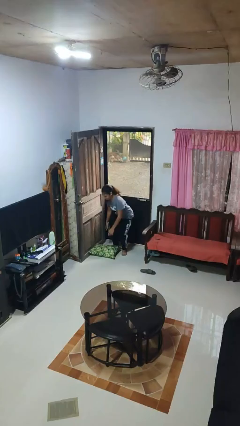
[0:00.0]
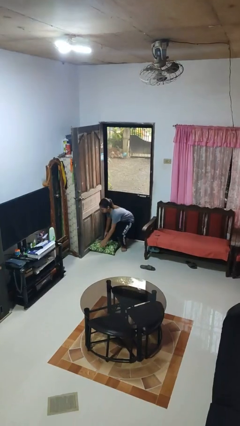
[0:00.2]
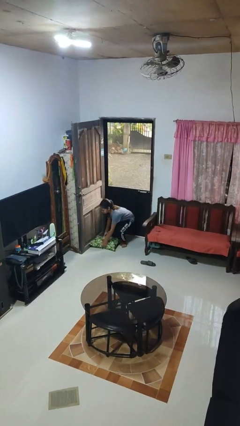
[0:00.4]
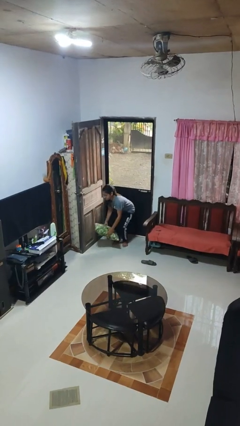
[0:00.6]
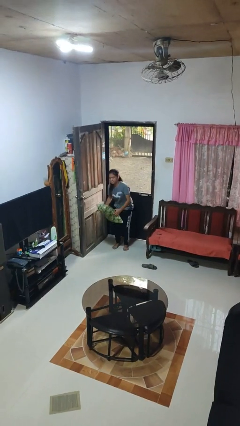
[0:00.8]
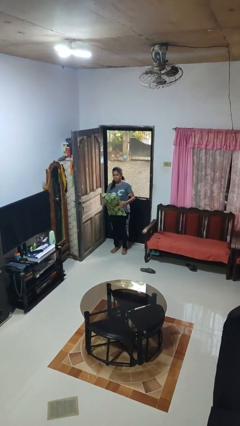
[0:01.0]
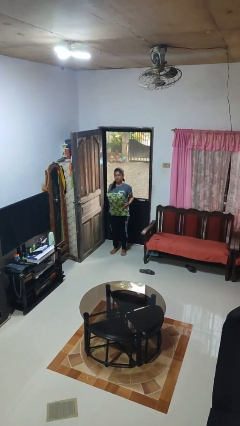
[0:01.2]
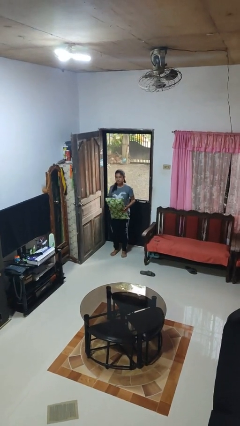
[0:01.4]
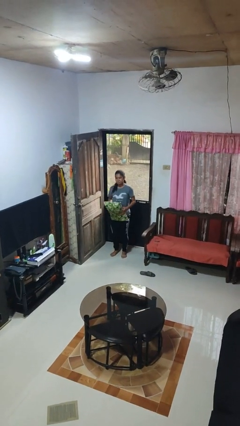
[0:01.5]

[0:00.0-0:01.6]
person picks up object from floor

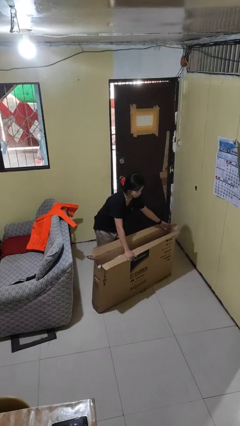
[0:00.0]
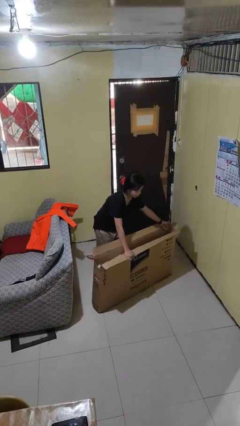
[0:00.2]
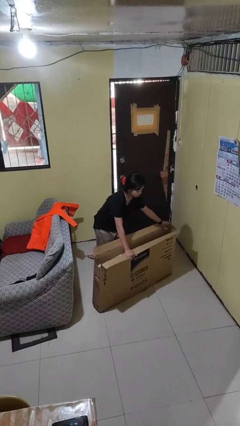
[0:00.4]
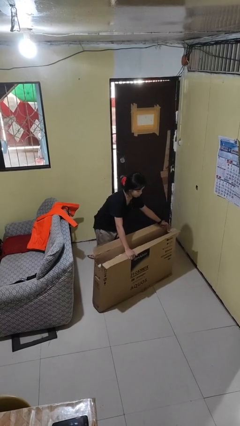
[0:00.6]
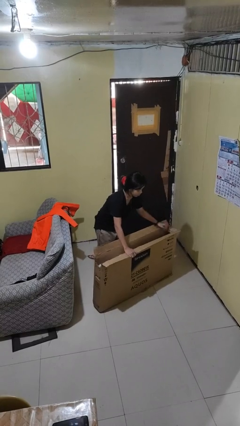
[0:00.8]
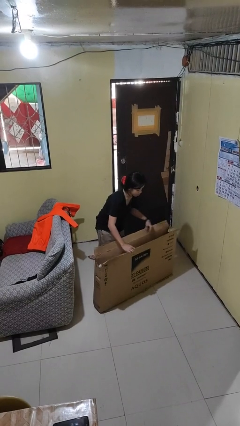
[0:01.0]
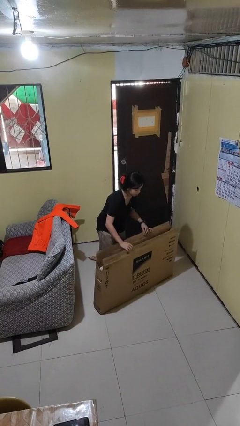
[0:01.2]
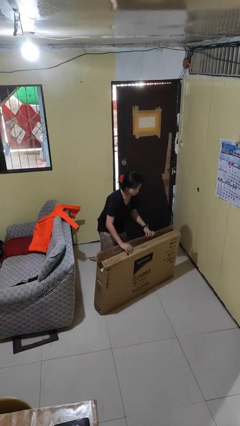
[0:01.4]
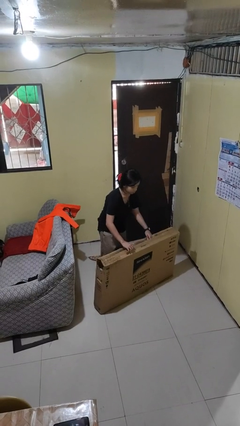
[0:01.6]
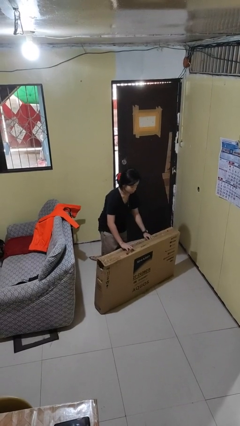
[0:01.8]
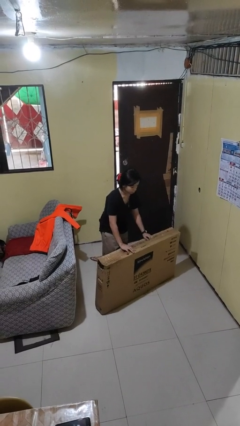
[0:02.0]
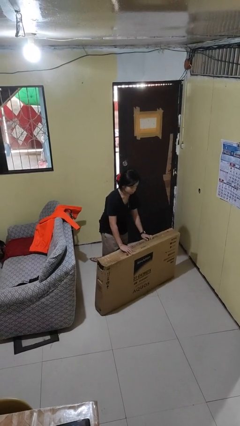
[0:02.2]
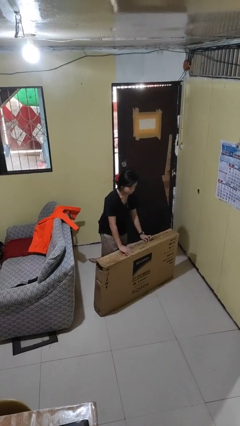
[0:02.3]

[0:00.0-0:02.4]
person closes box

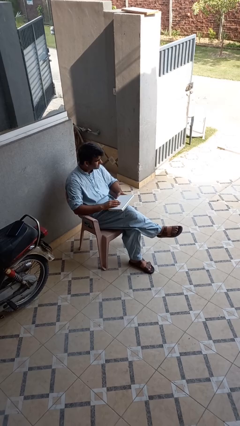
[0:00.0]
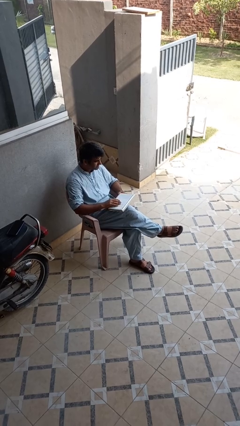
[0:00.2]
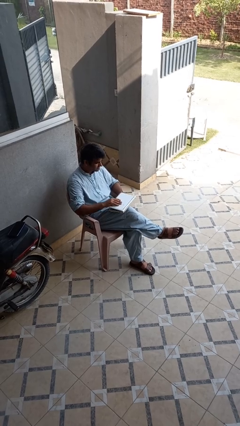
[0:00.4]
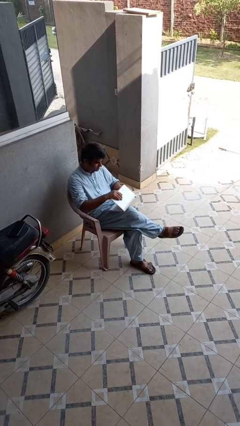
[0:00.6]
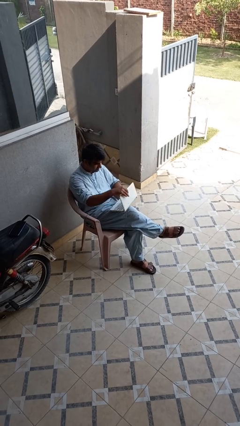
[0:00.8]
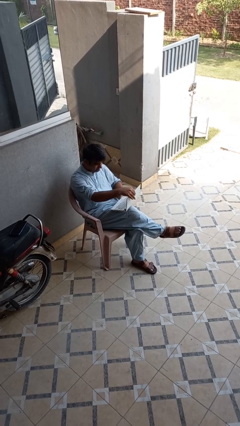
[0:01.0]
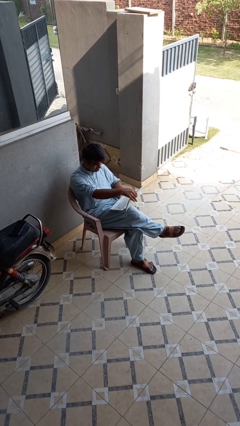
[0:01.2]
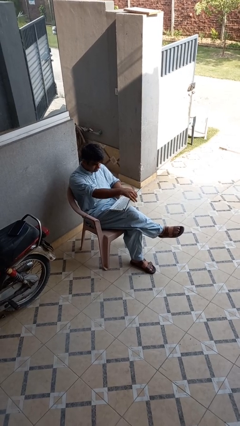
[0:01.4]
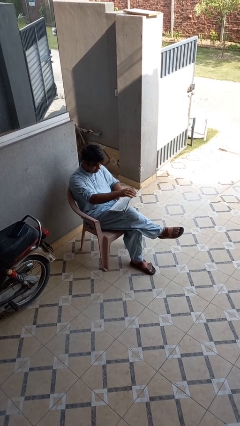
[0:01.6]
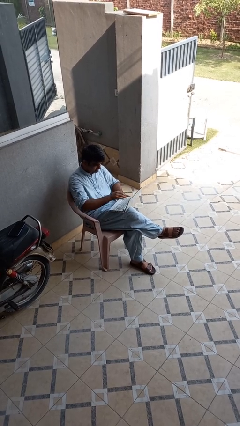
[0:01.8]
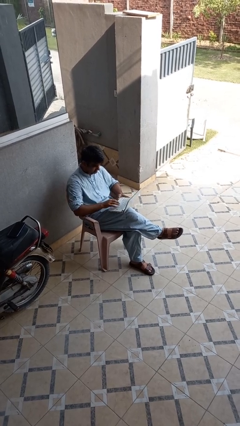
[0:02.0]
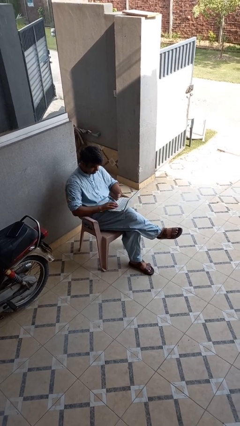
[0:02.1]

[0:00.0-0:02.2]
person opens laptop

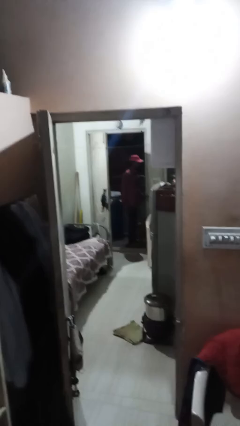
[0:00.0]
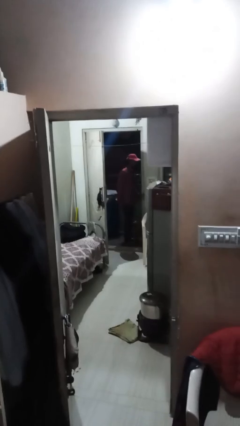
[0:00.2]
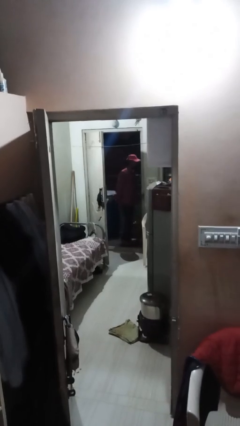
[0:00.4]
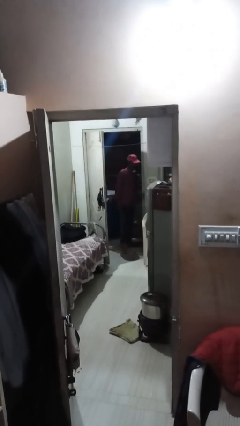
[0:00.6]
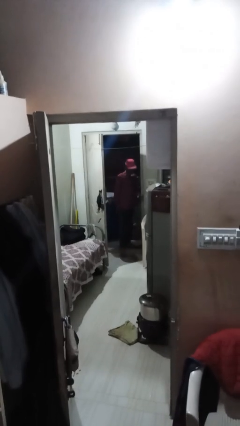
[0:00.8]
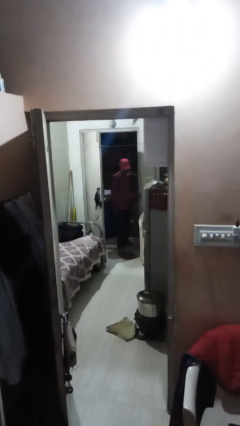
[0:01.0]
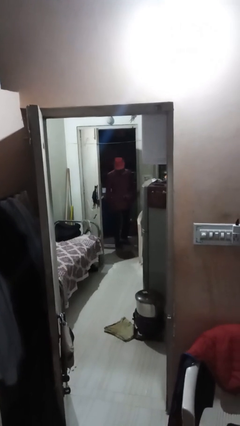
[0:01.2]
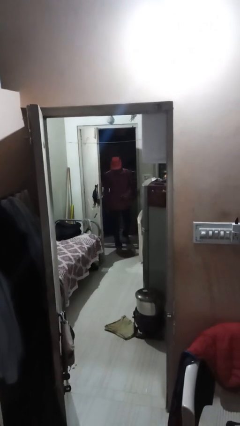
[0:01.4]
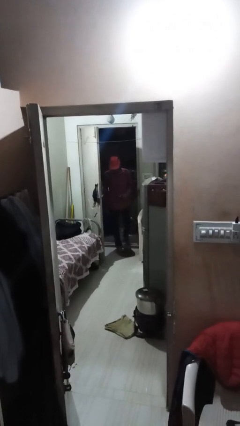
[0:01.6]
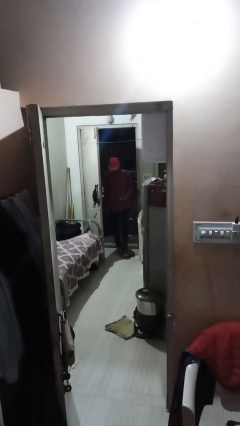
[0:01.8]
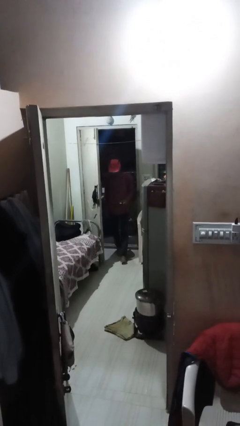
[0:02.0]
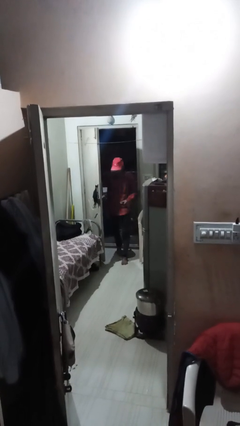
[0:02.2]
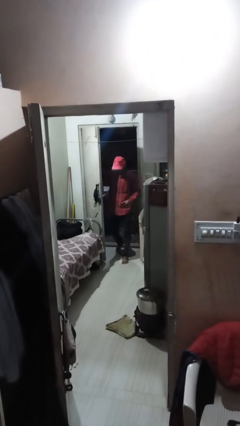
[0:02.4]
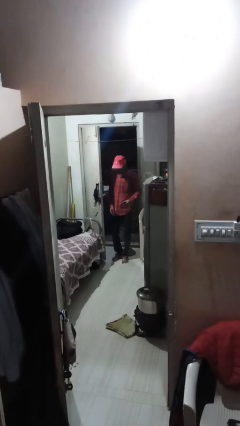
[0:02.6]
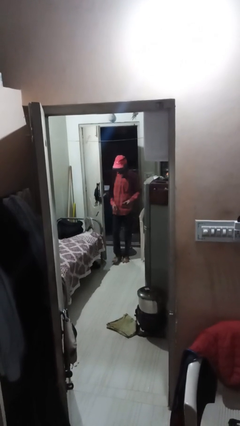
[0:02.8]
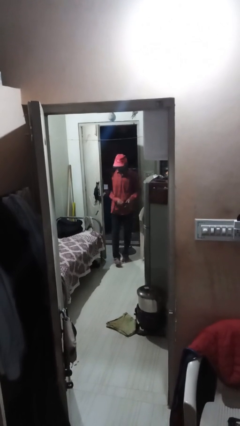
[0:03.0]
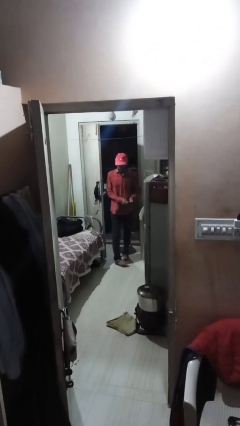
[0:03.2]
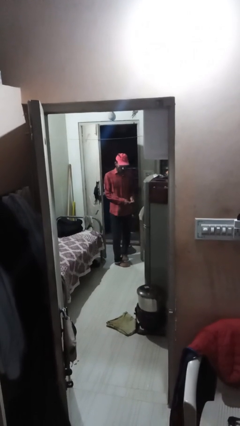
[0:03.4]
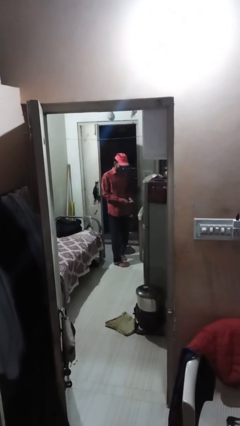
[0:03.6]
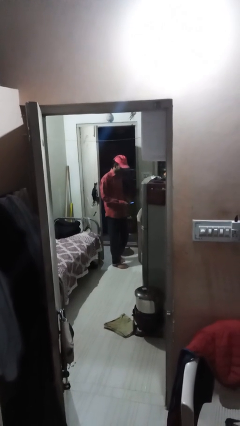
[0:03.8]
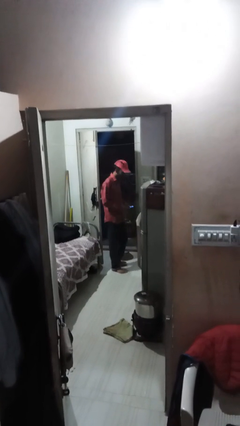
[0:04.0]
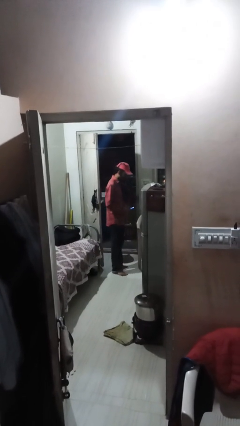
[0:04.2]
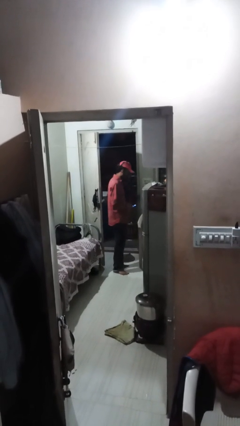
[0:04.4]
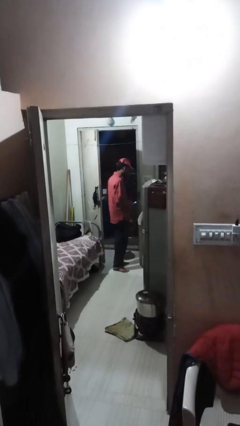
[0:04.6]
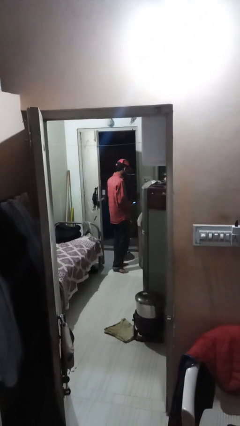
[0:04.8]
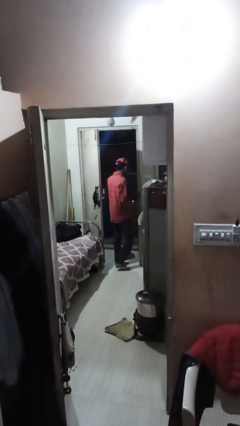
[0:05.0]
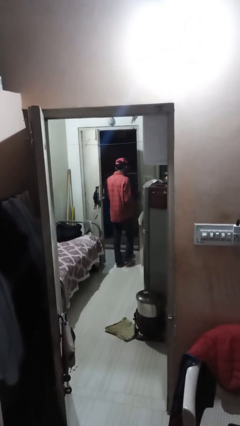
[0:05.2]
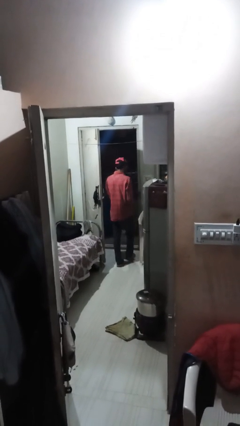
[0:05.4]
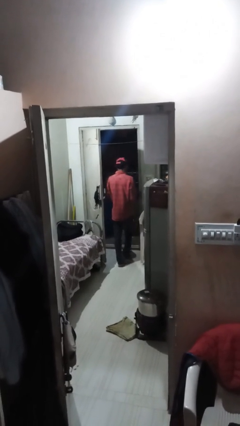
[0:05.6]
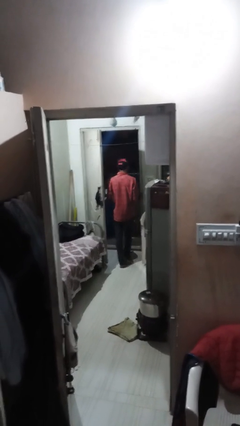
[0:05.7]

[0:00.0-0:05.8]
person enters scene through structure

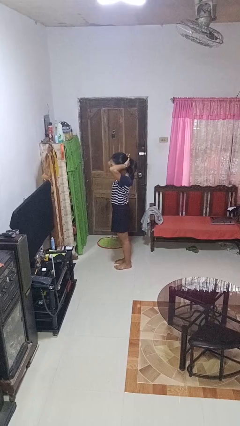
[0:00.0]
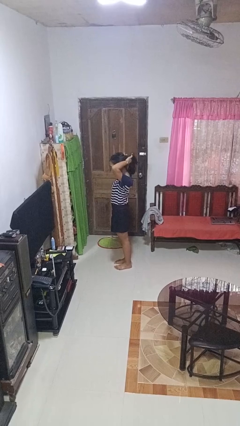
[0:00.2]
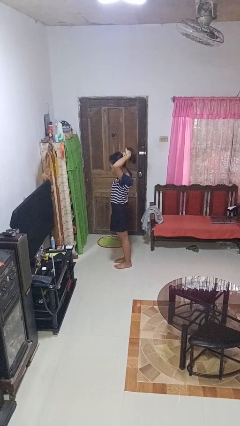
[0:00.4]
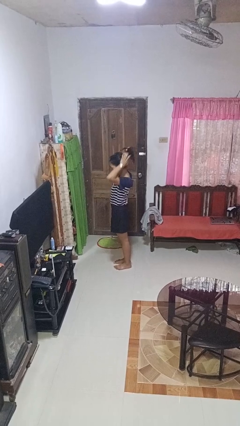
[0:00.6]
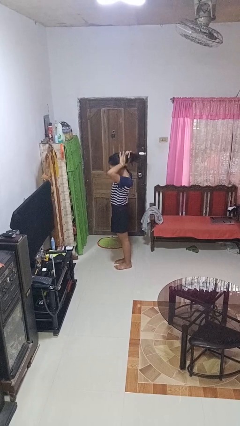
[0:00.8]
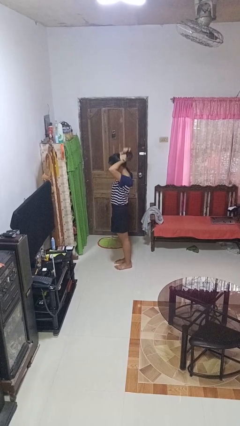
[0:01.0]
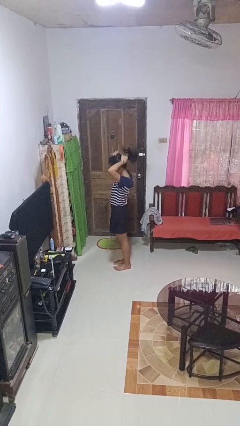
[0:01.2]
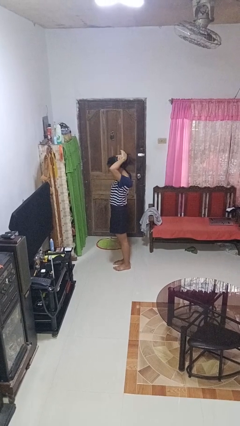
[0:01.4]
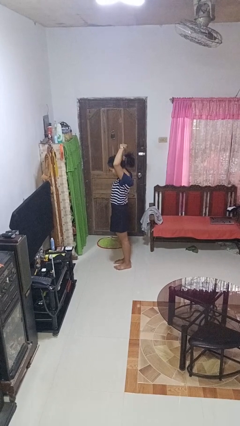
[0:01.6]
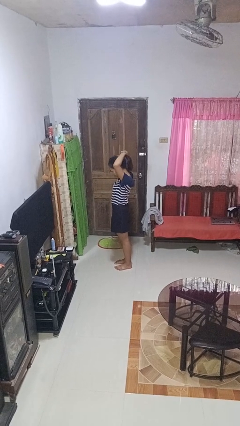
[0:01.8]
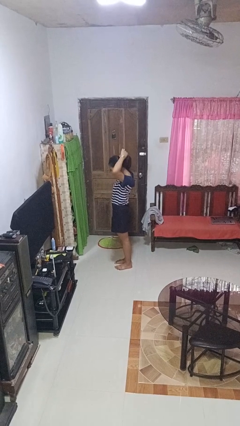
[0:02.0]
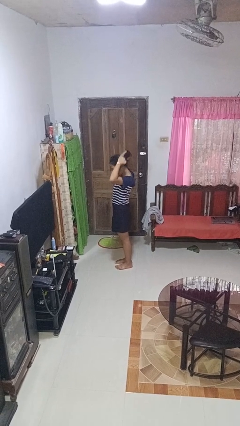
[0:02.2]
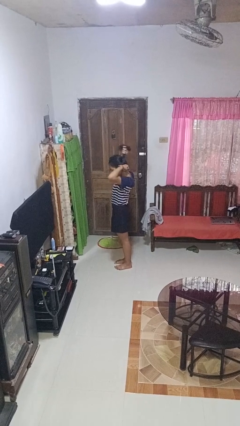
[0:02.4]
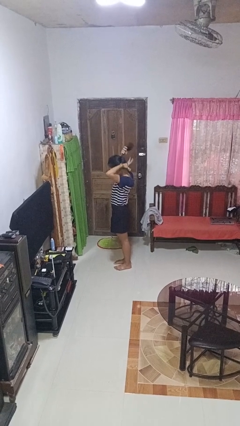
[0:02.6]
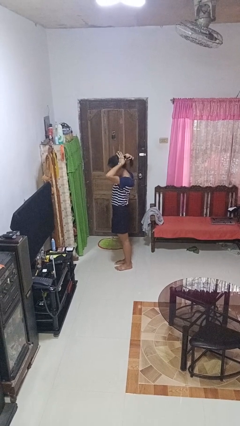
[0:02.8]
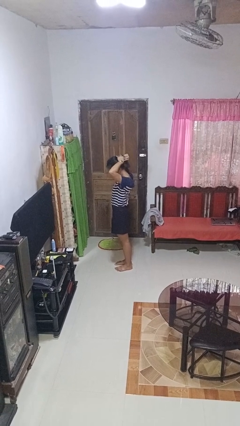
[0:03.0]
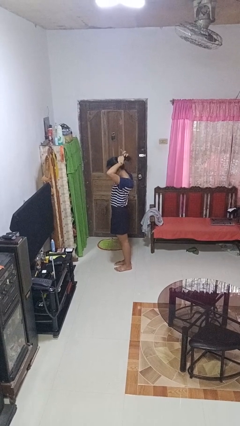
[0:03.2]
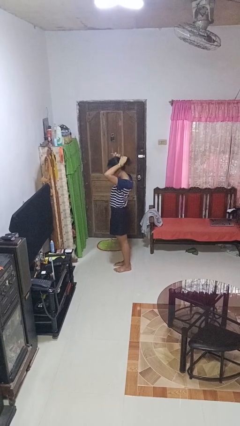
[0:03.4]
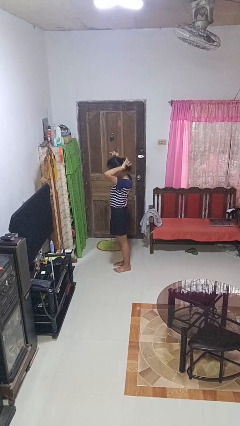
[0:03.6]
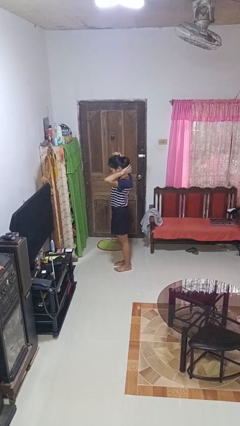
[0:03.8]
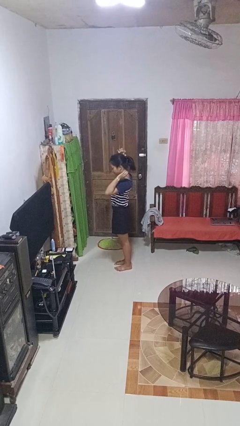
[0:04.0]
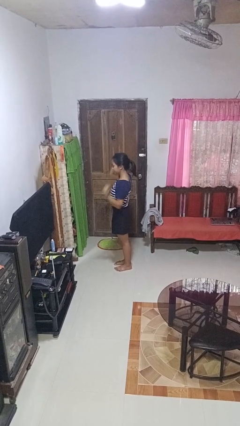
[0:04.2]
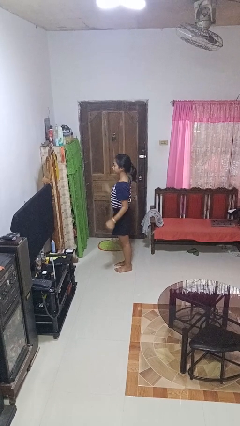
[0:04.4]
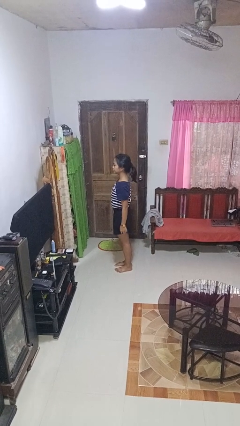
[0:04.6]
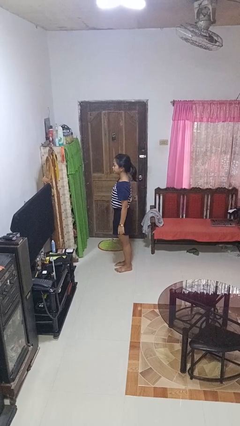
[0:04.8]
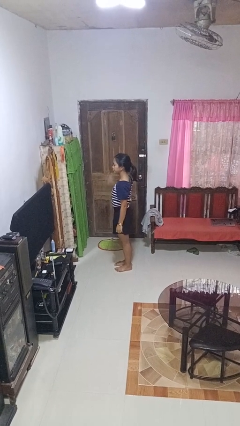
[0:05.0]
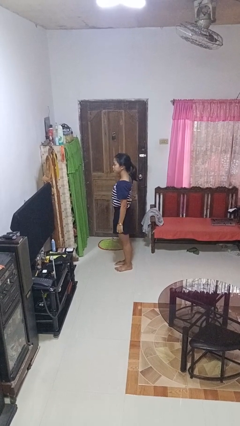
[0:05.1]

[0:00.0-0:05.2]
person puts hair in ponytail

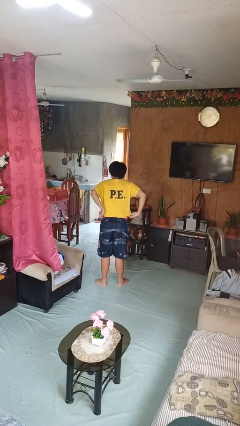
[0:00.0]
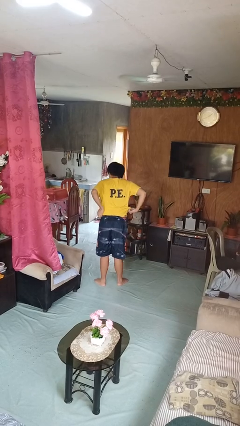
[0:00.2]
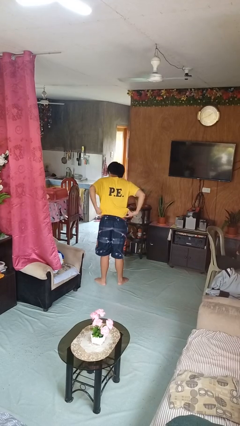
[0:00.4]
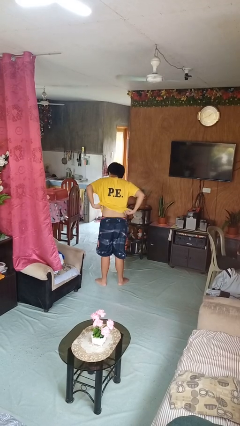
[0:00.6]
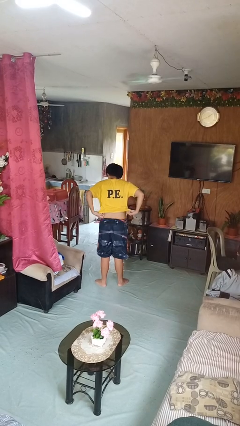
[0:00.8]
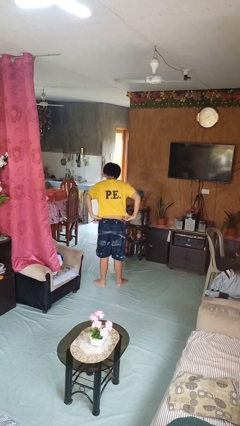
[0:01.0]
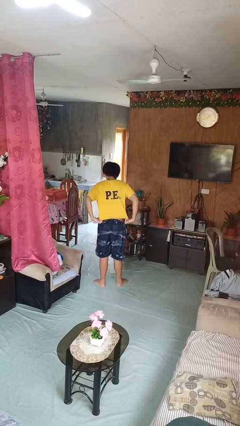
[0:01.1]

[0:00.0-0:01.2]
person untucks shirt
